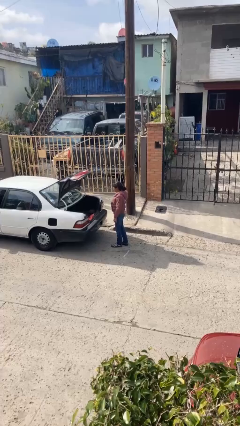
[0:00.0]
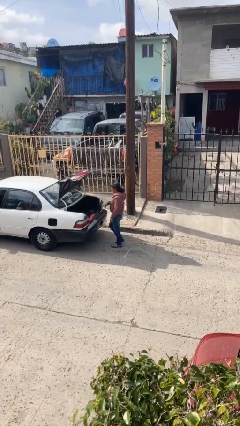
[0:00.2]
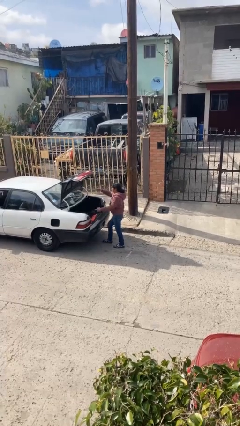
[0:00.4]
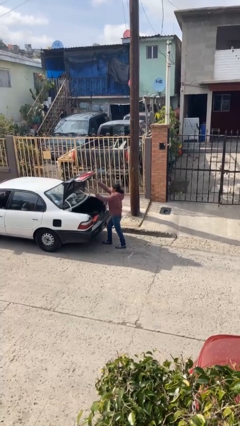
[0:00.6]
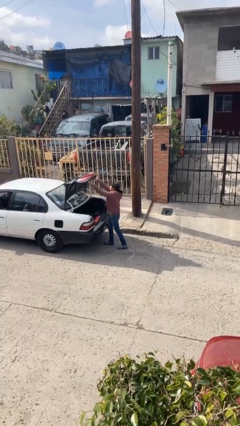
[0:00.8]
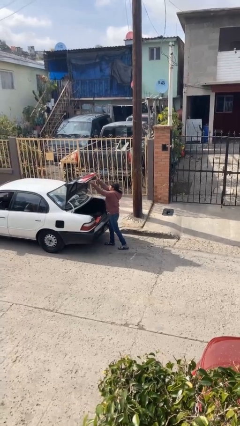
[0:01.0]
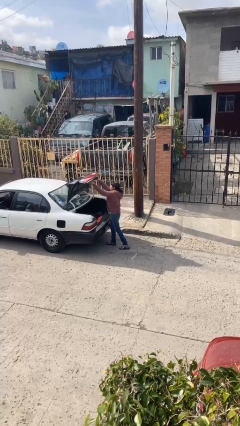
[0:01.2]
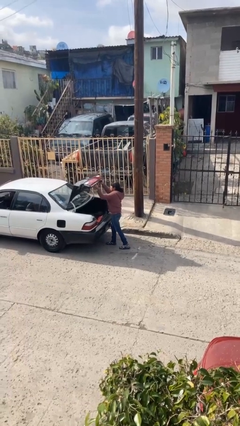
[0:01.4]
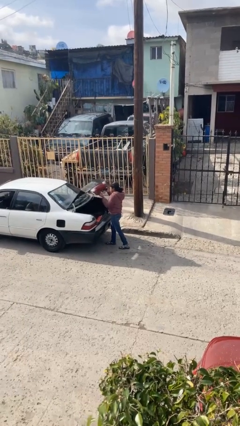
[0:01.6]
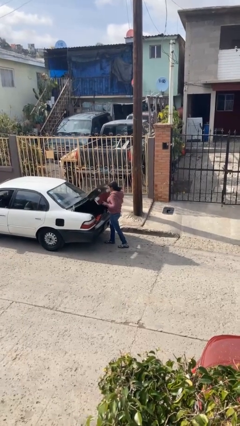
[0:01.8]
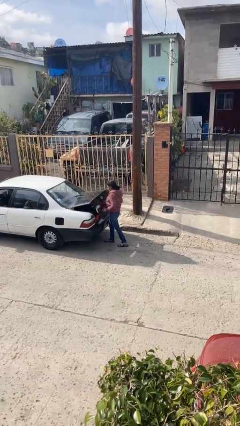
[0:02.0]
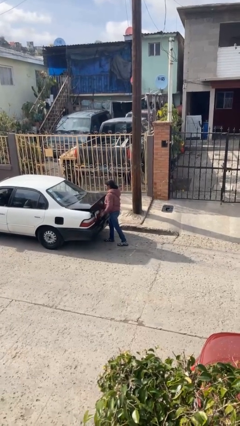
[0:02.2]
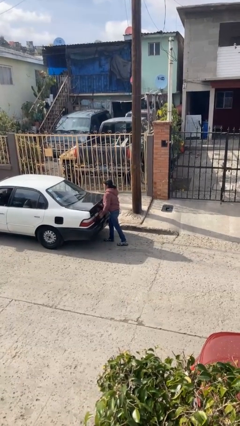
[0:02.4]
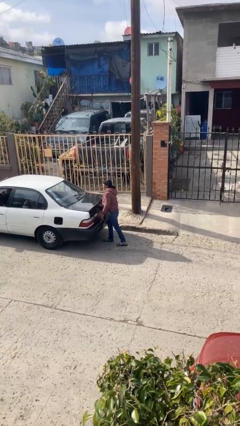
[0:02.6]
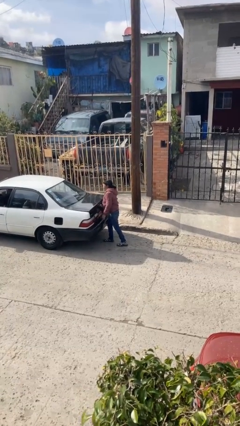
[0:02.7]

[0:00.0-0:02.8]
person closes car trunk

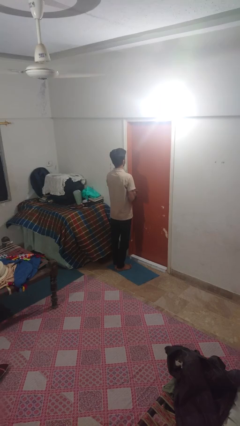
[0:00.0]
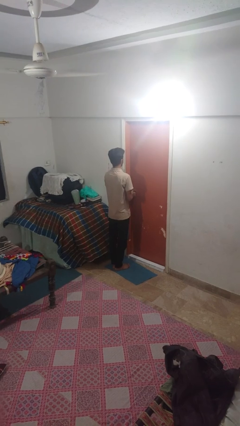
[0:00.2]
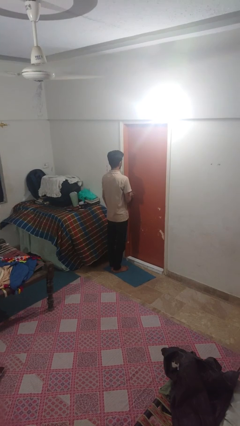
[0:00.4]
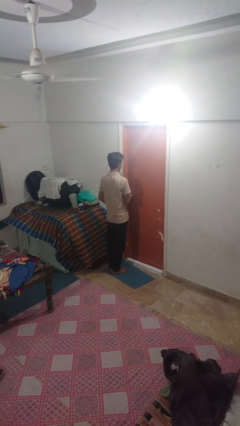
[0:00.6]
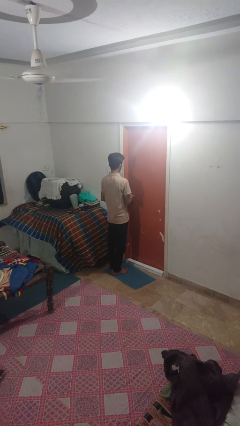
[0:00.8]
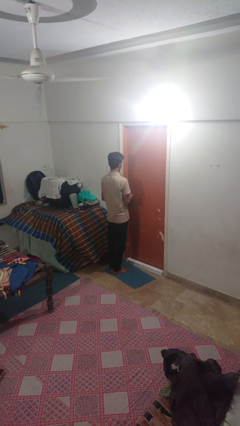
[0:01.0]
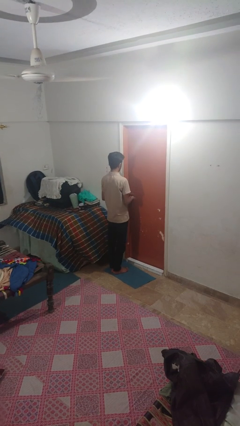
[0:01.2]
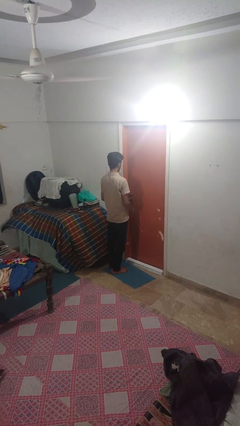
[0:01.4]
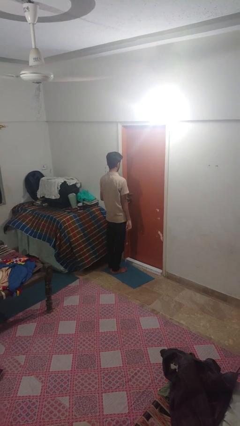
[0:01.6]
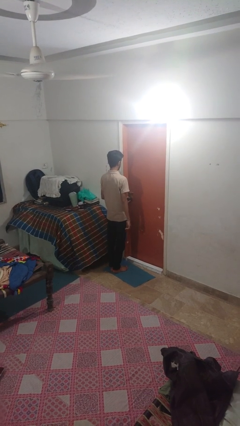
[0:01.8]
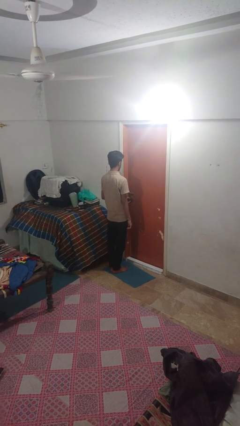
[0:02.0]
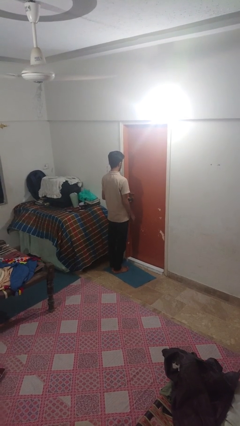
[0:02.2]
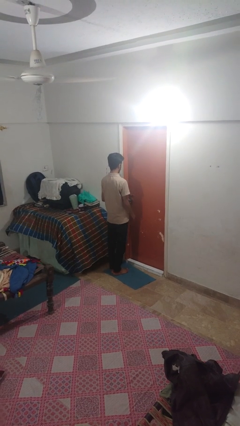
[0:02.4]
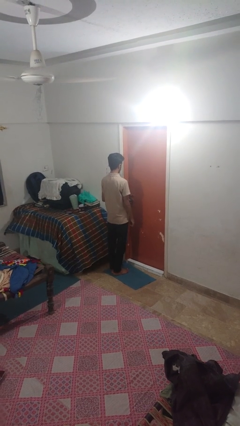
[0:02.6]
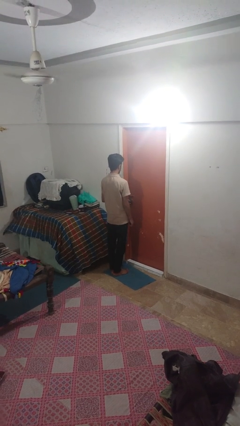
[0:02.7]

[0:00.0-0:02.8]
person unlocks door with keys

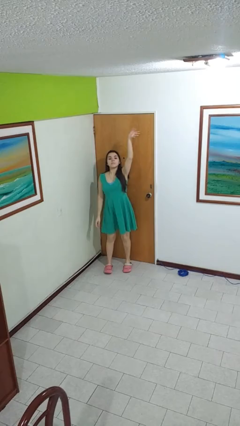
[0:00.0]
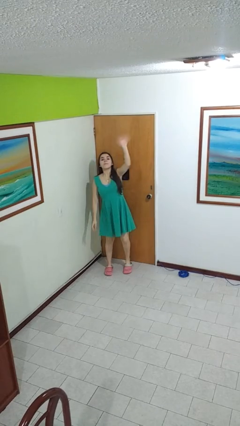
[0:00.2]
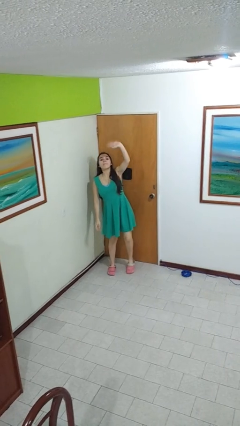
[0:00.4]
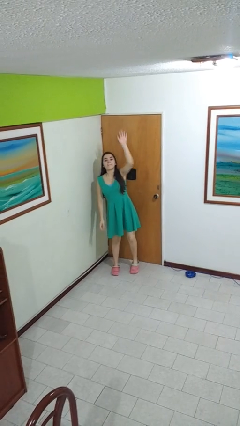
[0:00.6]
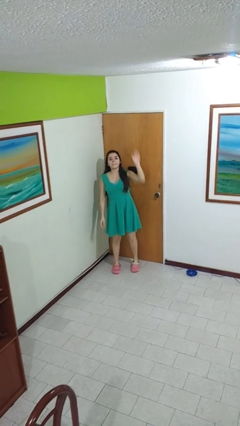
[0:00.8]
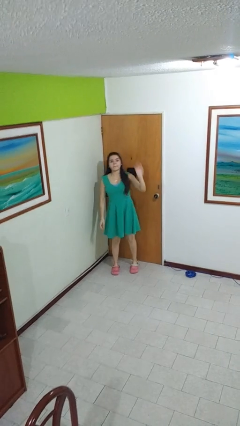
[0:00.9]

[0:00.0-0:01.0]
person waves at person

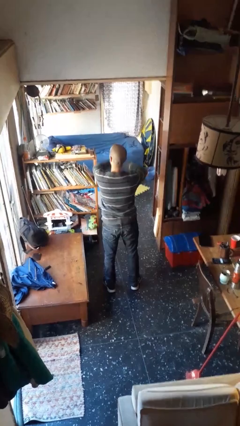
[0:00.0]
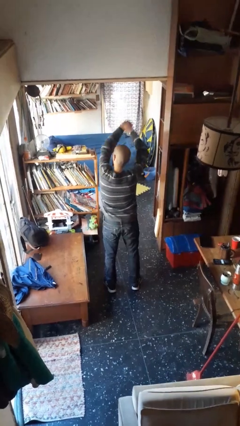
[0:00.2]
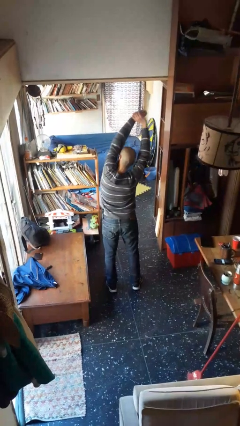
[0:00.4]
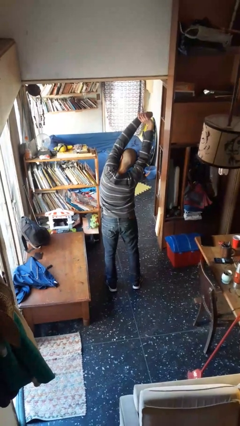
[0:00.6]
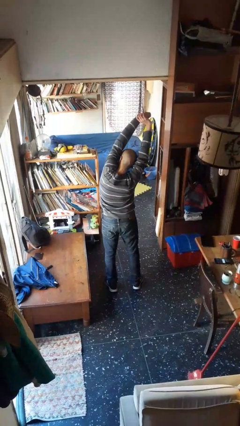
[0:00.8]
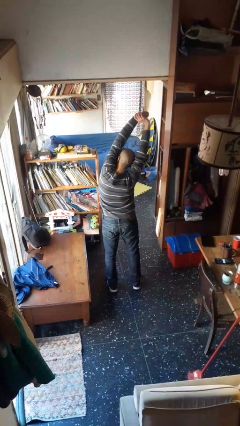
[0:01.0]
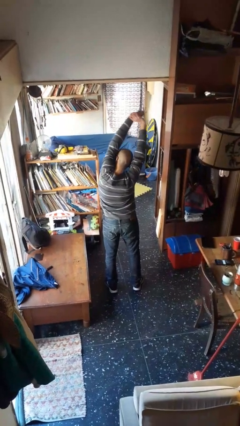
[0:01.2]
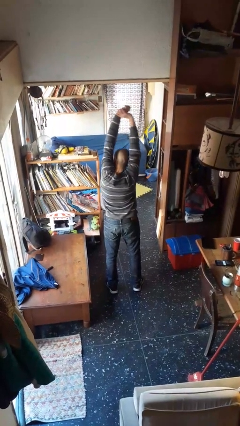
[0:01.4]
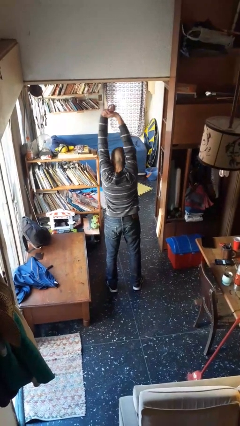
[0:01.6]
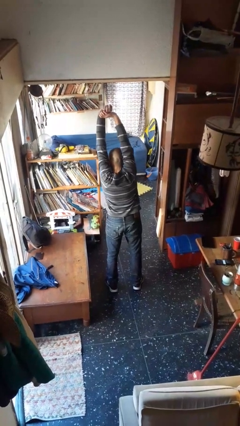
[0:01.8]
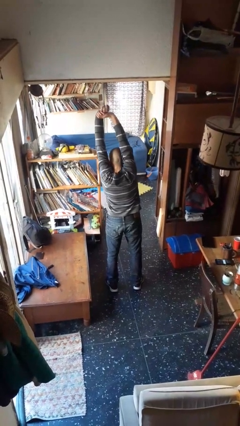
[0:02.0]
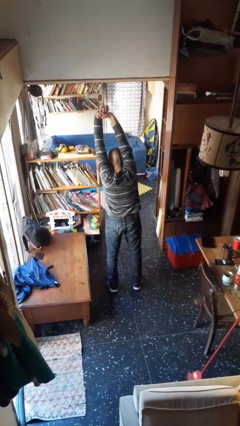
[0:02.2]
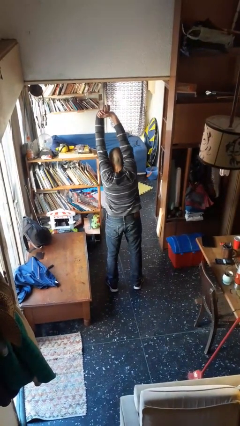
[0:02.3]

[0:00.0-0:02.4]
person stretches arms over head

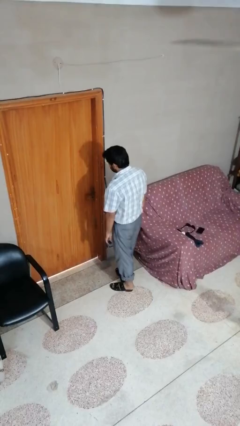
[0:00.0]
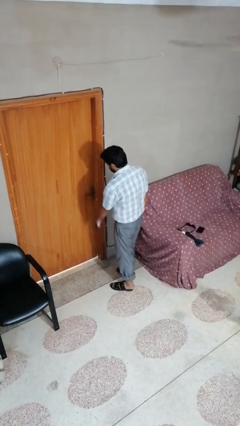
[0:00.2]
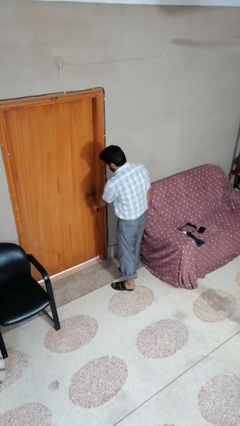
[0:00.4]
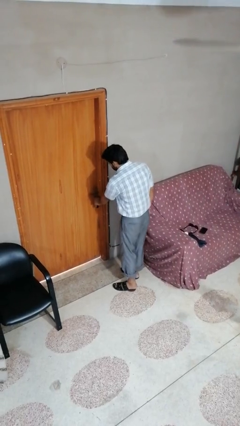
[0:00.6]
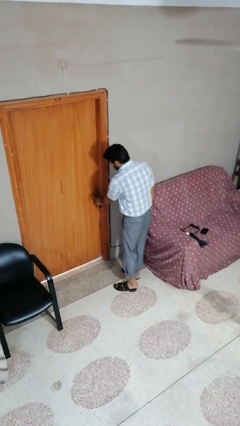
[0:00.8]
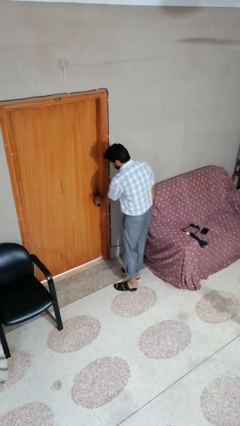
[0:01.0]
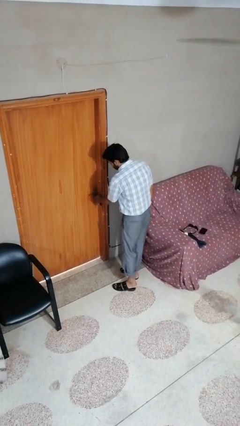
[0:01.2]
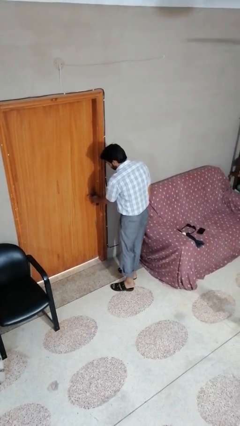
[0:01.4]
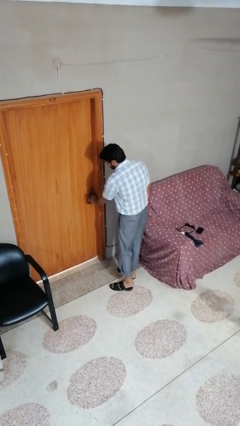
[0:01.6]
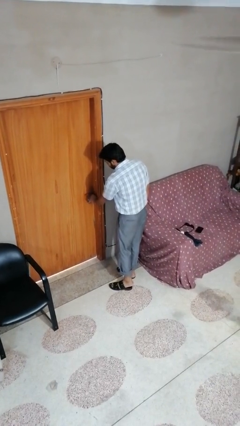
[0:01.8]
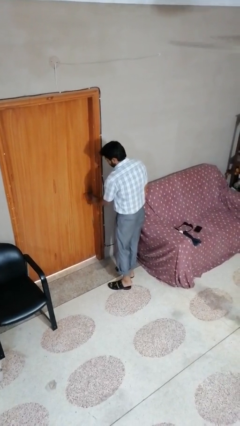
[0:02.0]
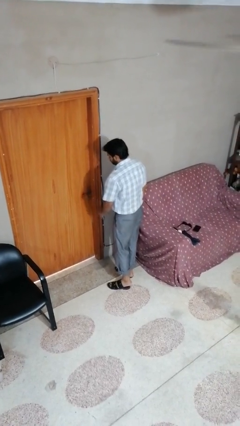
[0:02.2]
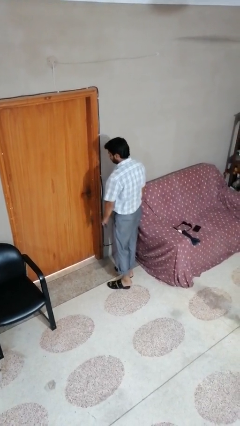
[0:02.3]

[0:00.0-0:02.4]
person locks door with keys

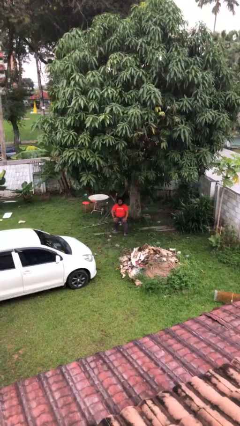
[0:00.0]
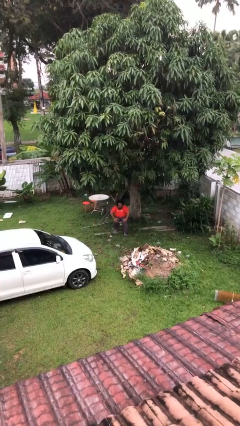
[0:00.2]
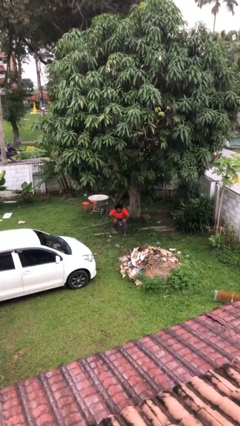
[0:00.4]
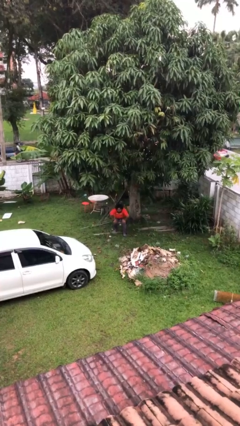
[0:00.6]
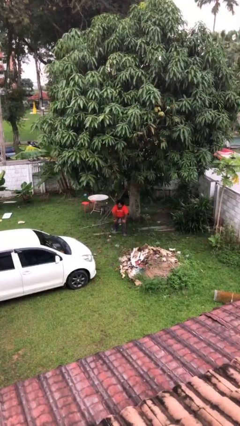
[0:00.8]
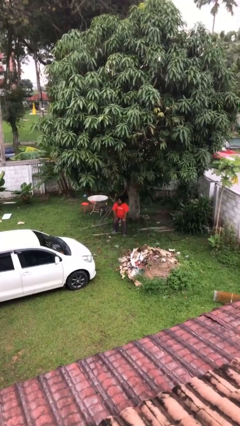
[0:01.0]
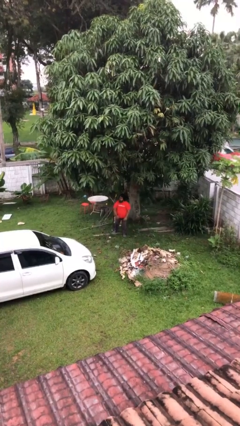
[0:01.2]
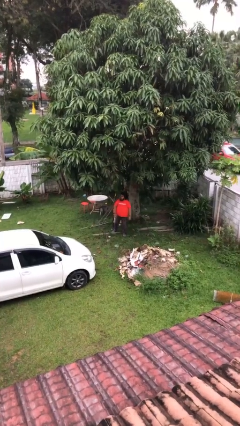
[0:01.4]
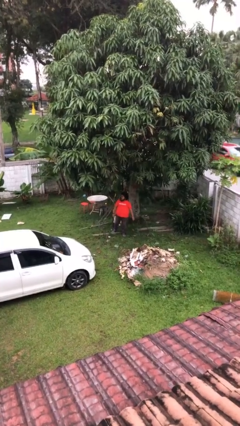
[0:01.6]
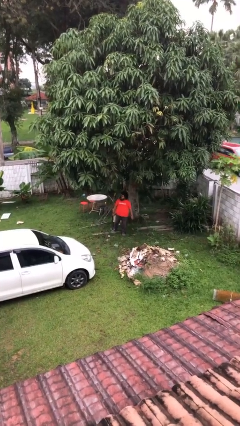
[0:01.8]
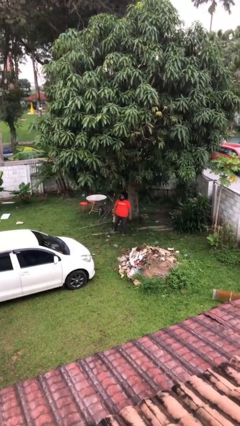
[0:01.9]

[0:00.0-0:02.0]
person stands up

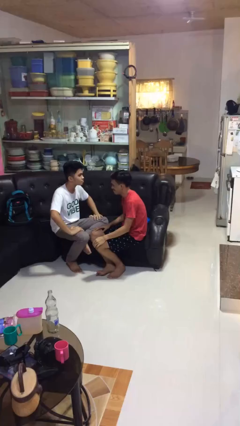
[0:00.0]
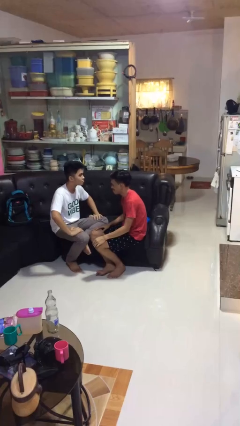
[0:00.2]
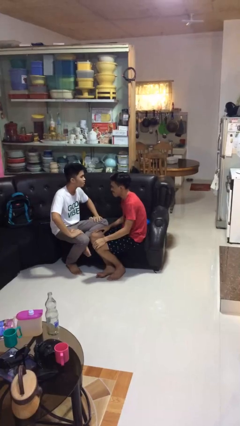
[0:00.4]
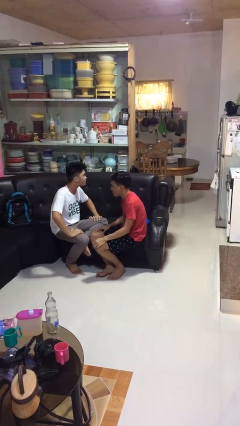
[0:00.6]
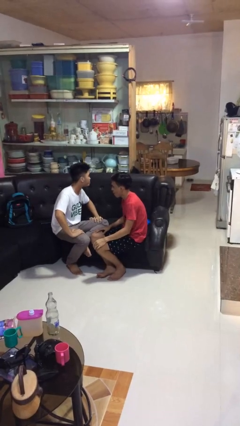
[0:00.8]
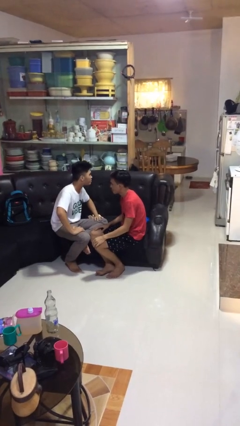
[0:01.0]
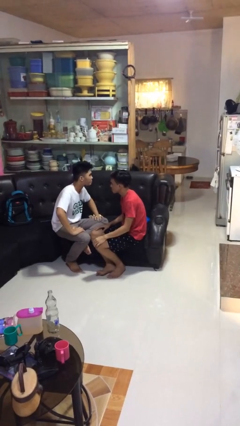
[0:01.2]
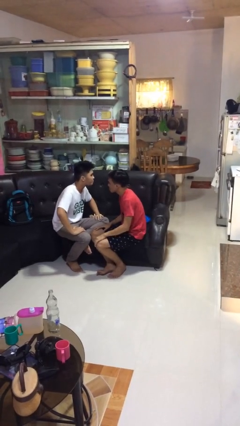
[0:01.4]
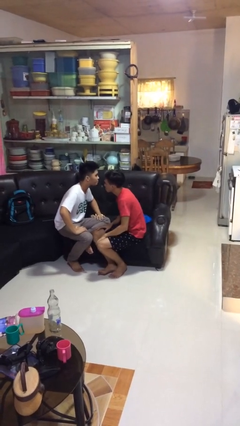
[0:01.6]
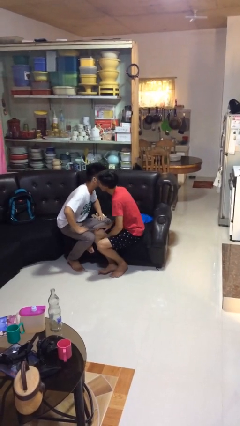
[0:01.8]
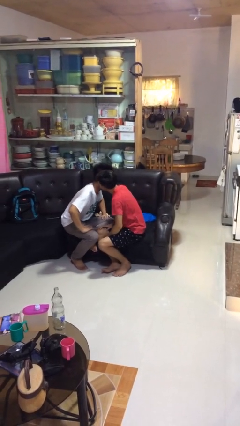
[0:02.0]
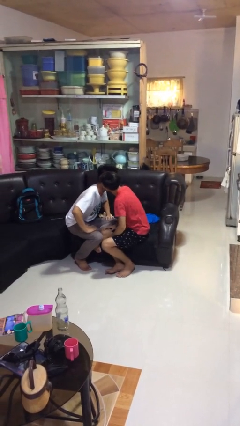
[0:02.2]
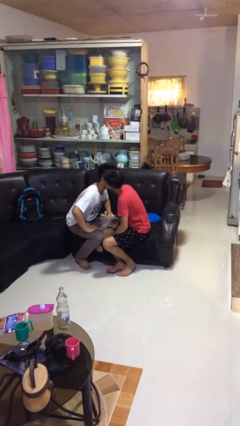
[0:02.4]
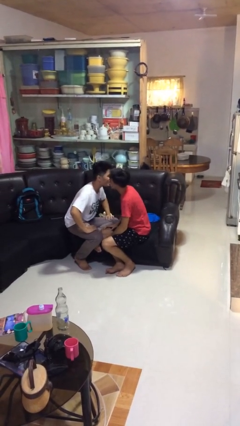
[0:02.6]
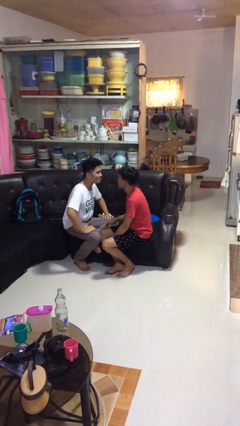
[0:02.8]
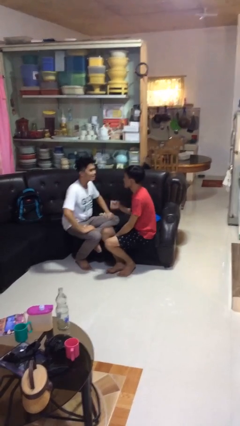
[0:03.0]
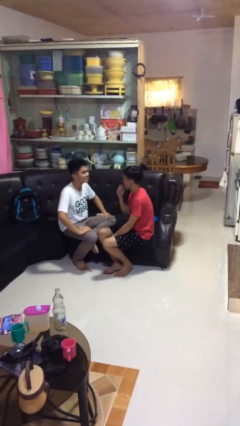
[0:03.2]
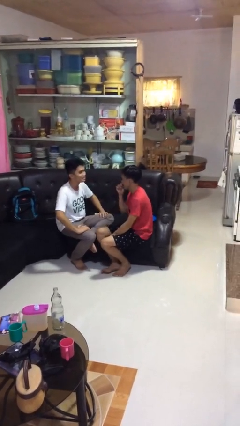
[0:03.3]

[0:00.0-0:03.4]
person kisses cheek of person

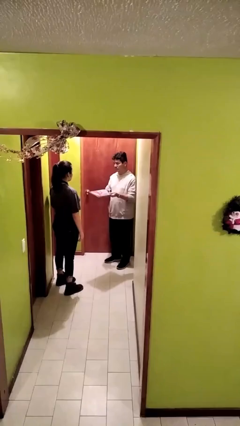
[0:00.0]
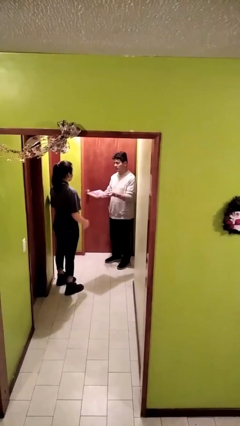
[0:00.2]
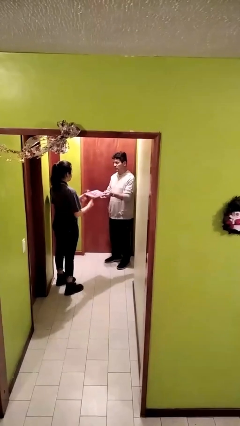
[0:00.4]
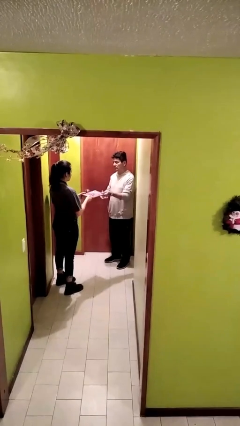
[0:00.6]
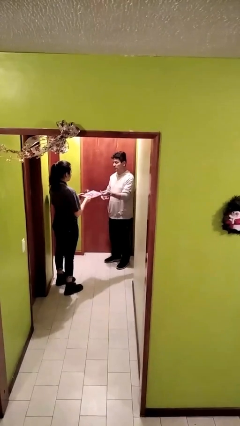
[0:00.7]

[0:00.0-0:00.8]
person transfers object to person
